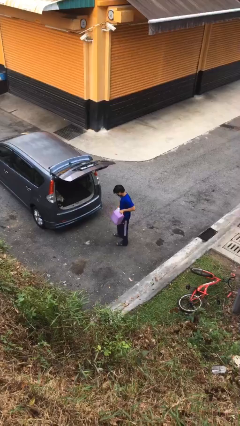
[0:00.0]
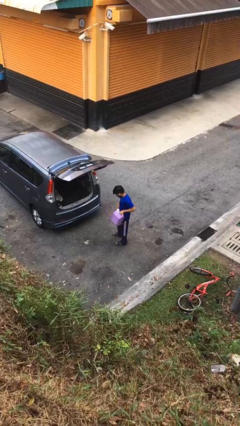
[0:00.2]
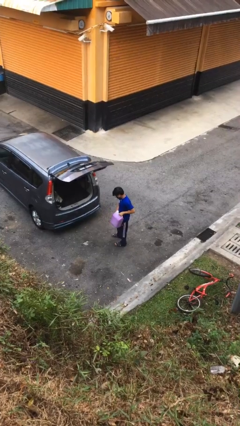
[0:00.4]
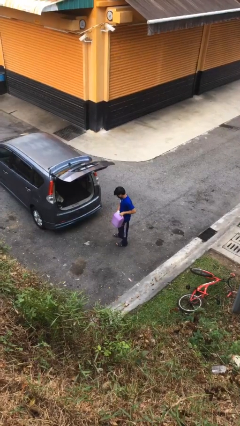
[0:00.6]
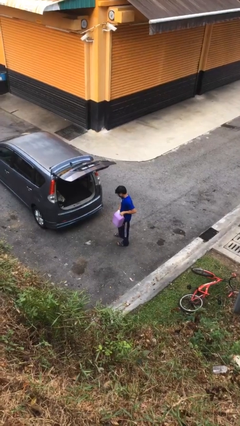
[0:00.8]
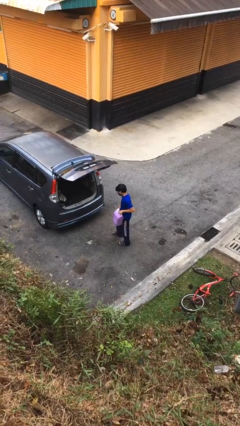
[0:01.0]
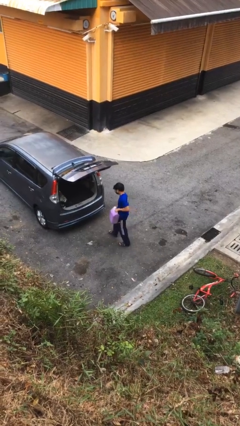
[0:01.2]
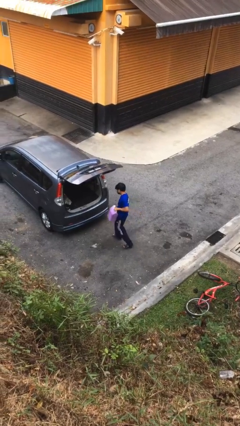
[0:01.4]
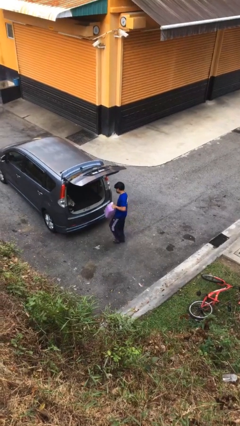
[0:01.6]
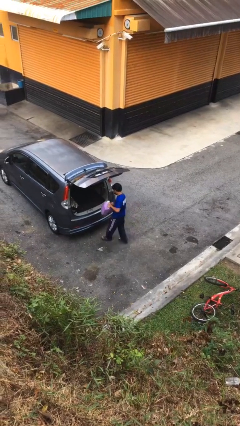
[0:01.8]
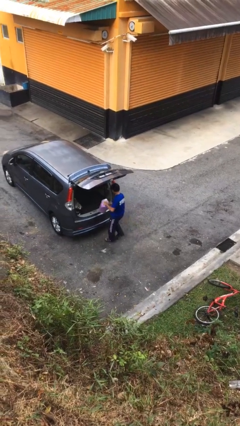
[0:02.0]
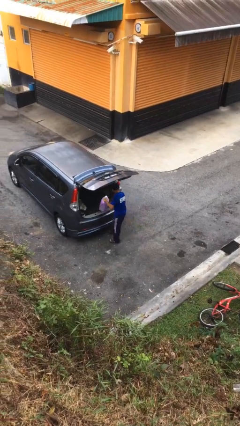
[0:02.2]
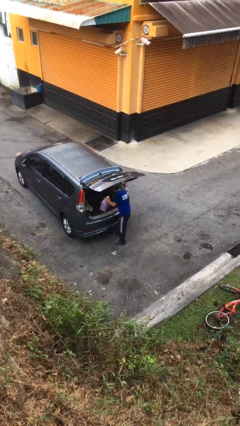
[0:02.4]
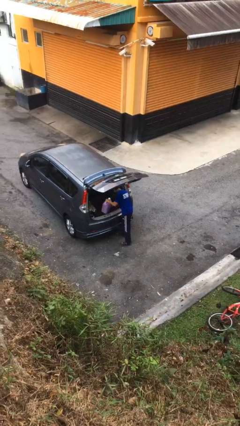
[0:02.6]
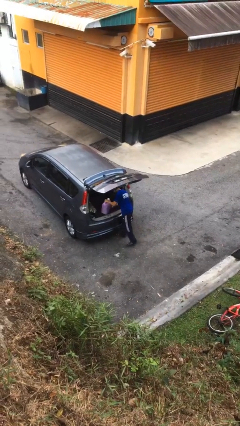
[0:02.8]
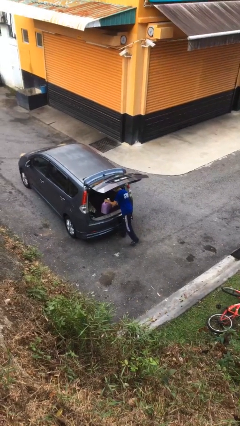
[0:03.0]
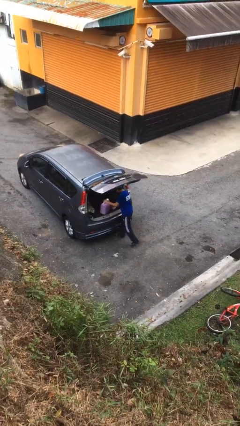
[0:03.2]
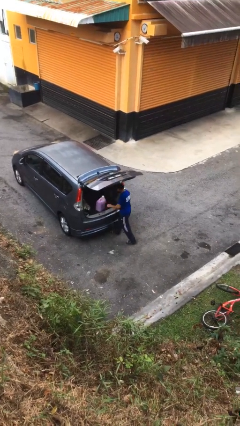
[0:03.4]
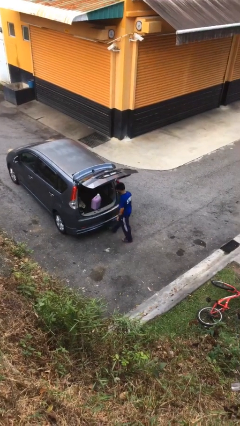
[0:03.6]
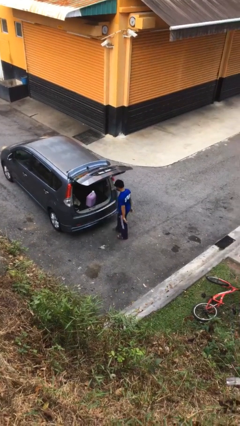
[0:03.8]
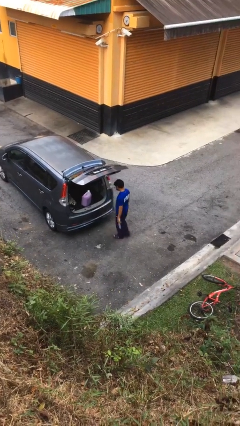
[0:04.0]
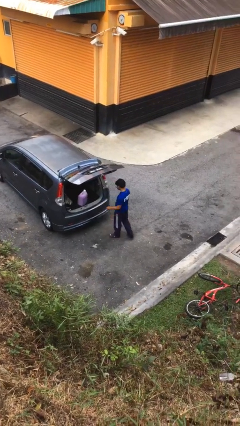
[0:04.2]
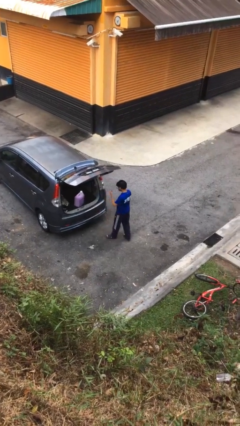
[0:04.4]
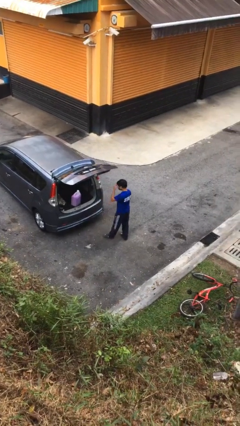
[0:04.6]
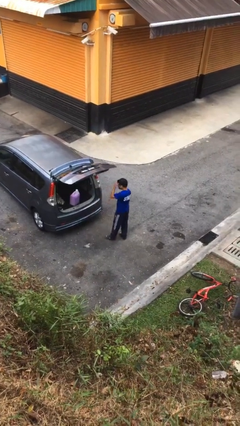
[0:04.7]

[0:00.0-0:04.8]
person loads car

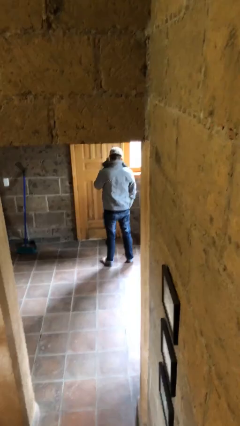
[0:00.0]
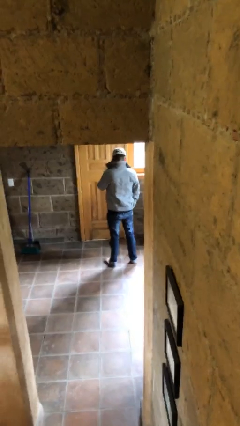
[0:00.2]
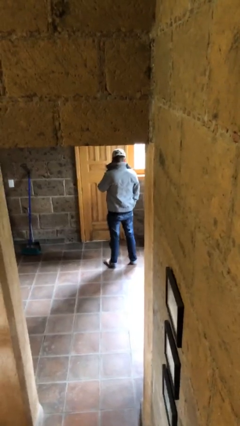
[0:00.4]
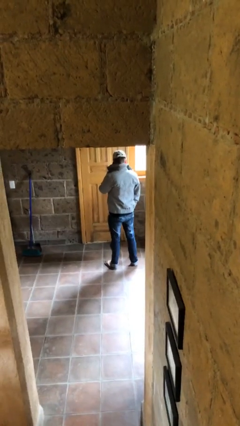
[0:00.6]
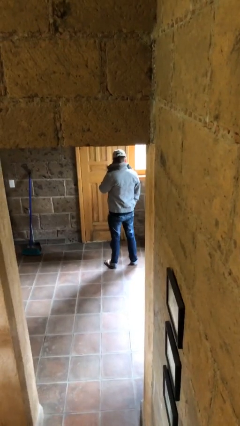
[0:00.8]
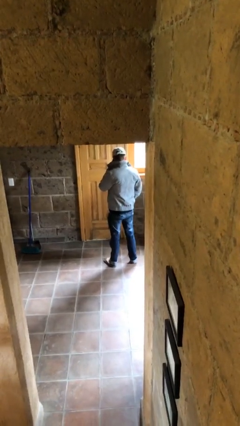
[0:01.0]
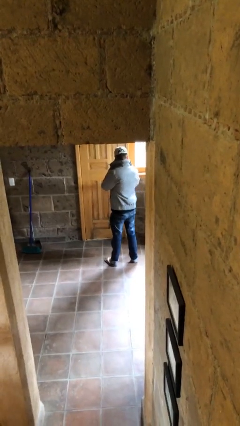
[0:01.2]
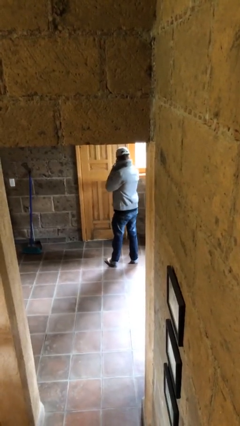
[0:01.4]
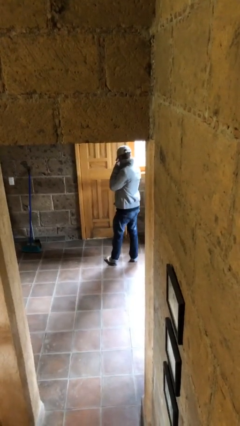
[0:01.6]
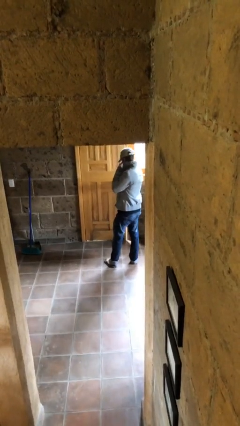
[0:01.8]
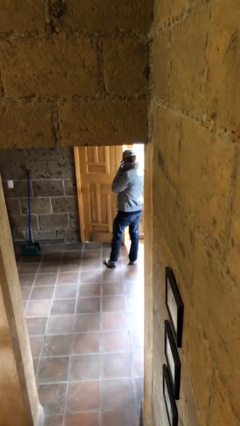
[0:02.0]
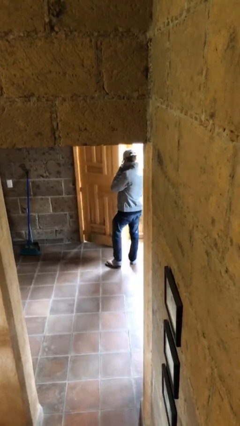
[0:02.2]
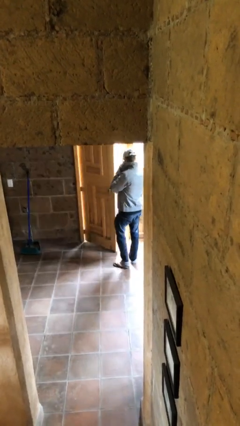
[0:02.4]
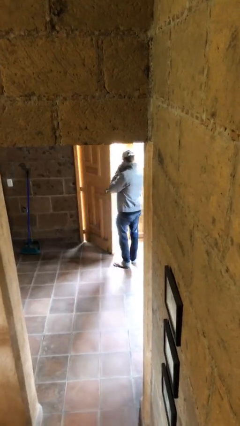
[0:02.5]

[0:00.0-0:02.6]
person opens facility door

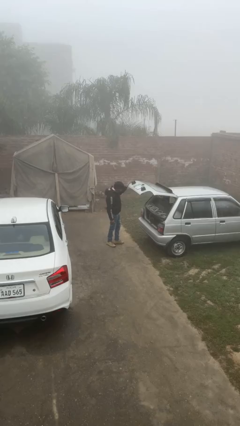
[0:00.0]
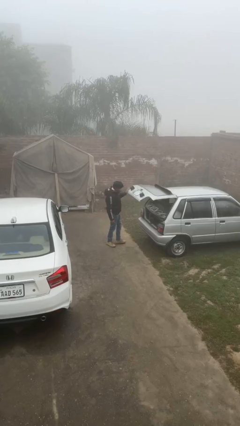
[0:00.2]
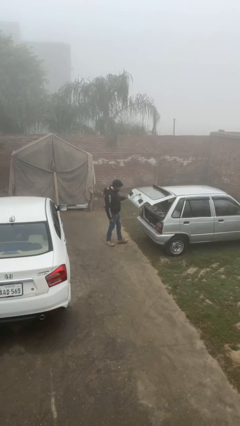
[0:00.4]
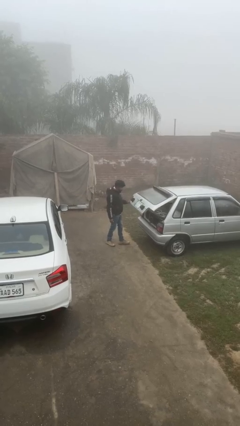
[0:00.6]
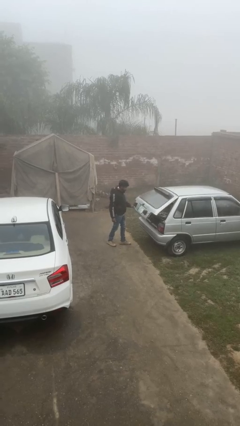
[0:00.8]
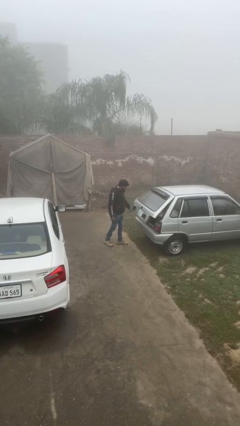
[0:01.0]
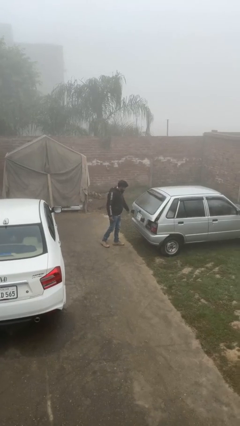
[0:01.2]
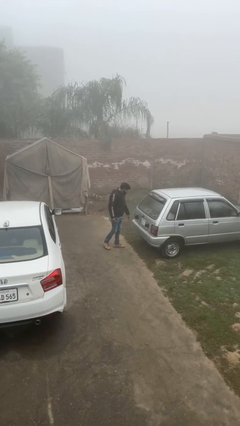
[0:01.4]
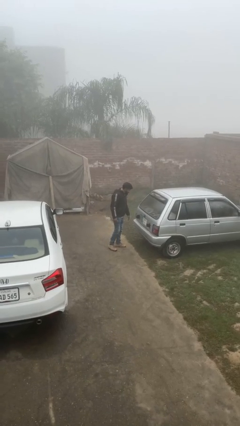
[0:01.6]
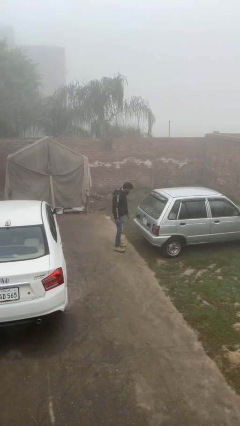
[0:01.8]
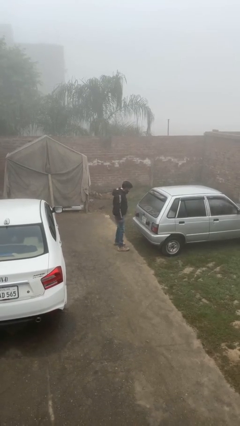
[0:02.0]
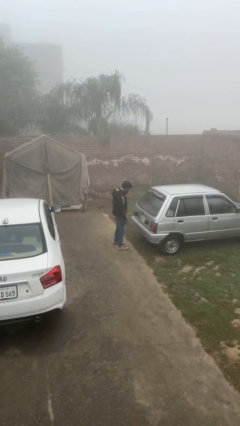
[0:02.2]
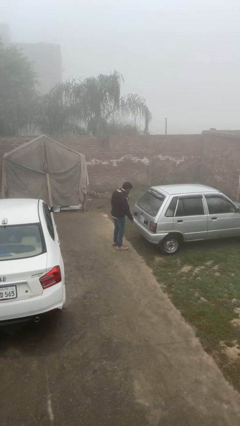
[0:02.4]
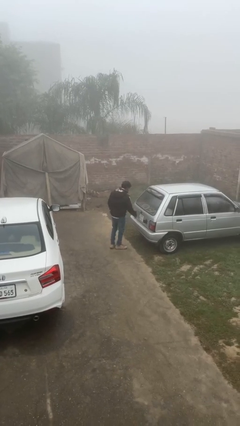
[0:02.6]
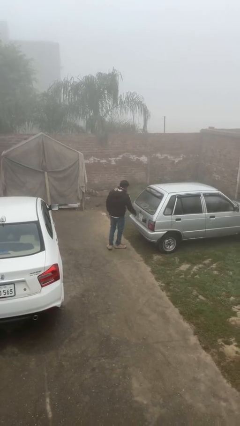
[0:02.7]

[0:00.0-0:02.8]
person closes car trunk

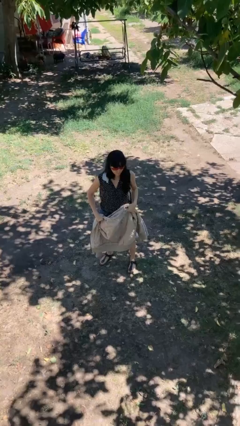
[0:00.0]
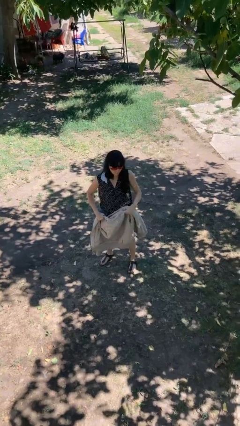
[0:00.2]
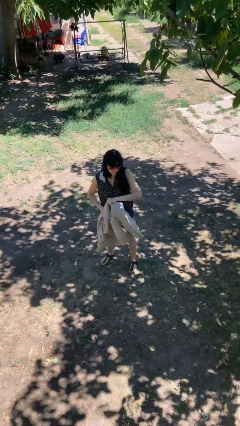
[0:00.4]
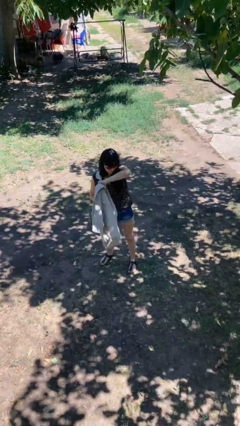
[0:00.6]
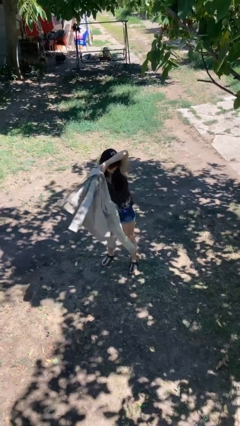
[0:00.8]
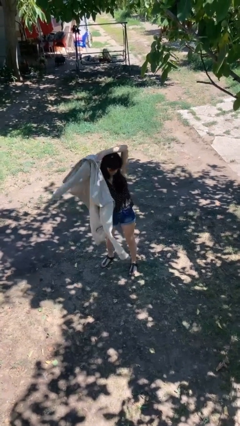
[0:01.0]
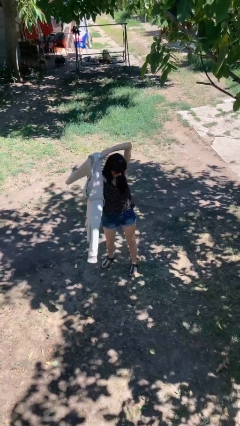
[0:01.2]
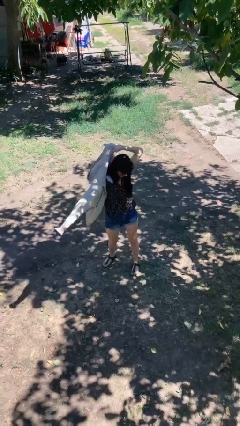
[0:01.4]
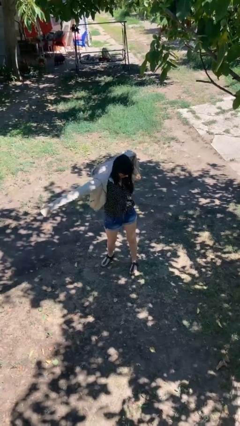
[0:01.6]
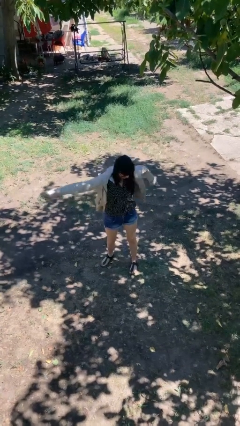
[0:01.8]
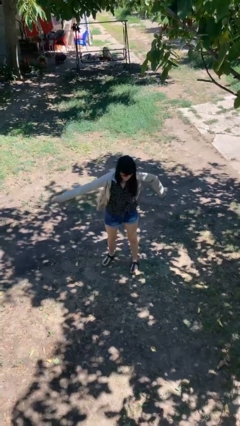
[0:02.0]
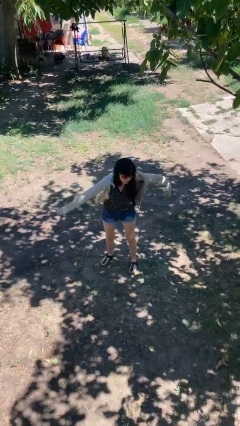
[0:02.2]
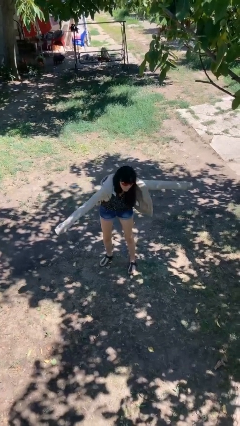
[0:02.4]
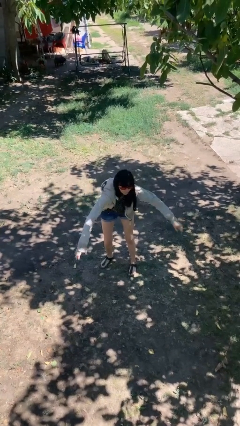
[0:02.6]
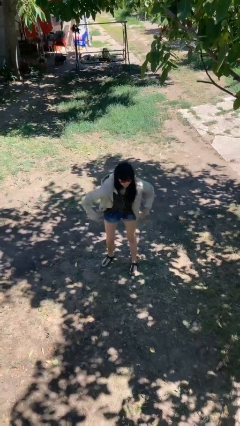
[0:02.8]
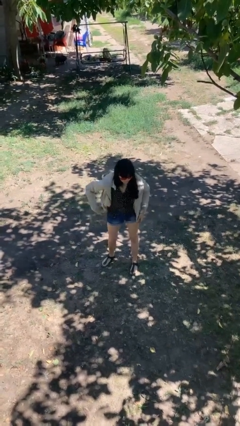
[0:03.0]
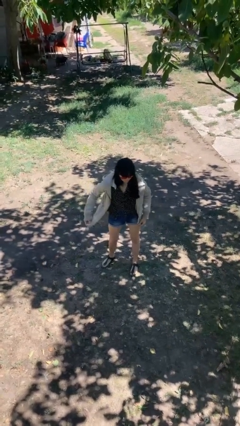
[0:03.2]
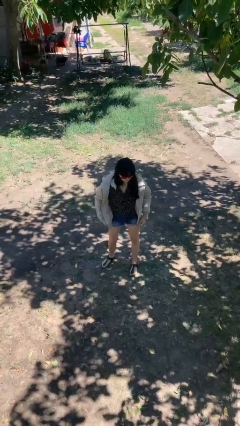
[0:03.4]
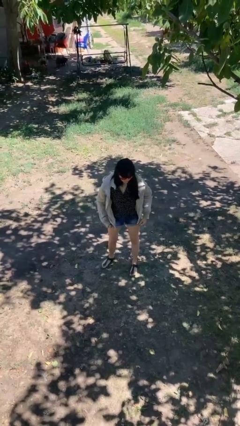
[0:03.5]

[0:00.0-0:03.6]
person puts on jacket

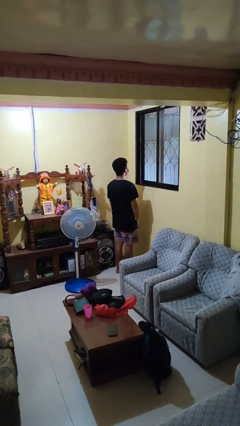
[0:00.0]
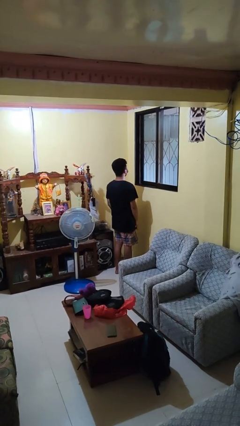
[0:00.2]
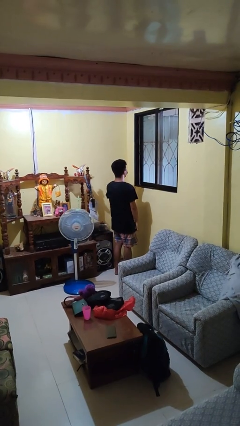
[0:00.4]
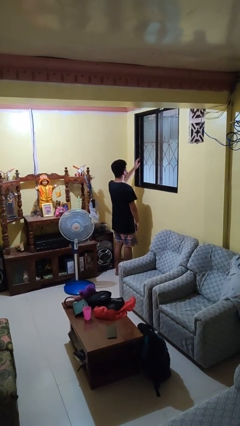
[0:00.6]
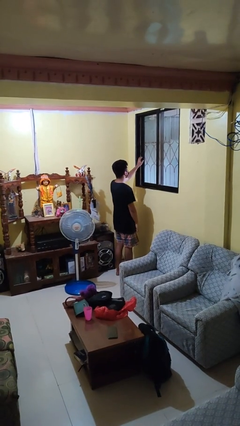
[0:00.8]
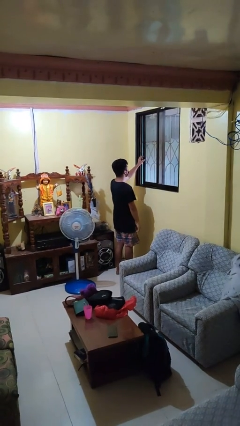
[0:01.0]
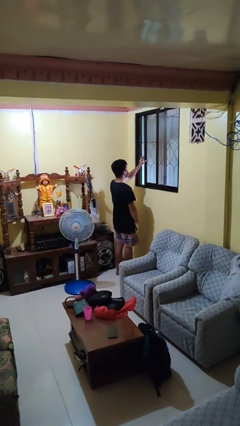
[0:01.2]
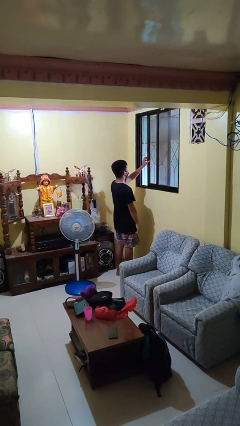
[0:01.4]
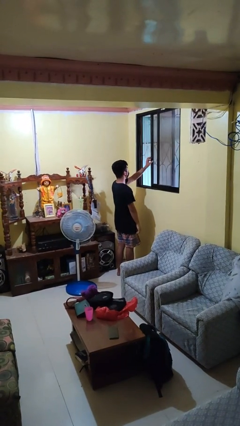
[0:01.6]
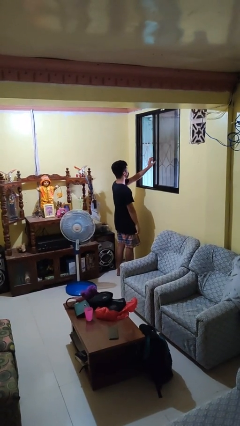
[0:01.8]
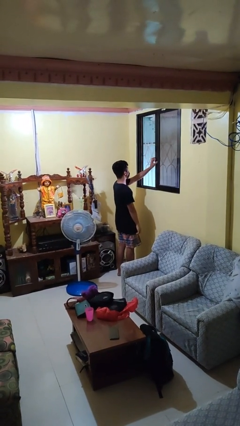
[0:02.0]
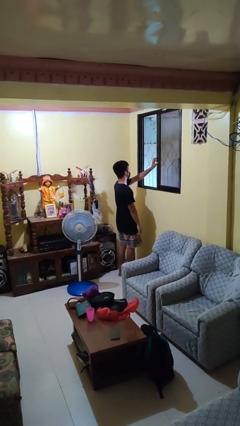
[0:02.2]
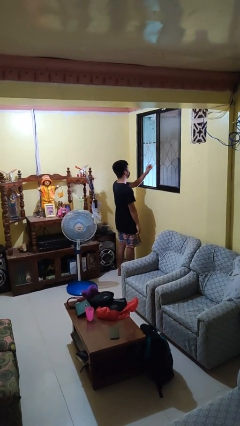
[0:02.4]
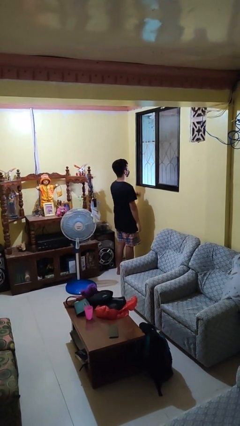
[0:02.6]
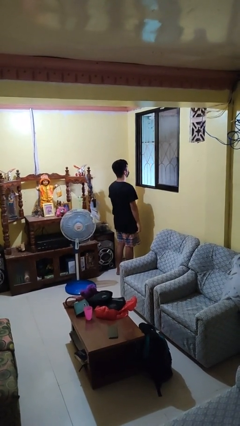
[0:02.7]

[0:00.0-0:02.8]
person opens home window

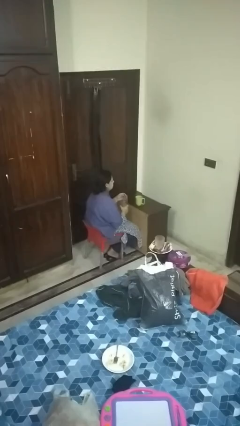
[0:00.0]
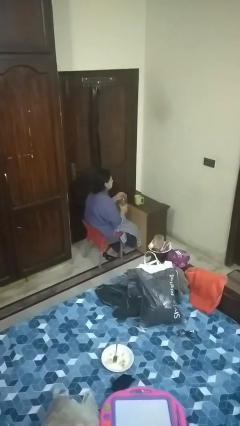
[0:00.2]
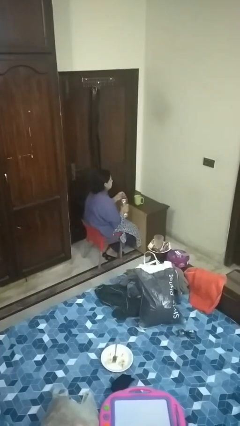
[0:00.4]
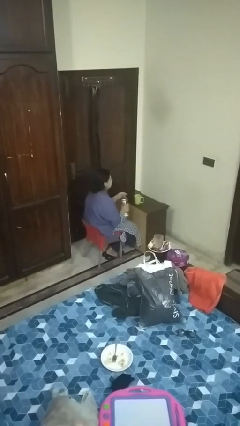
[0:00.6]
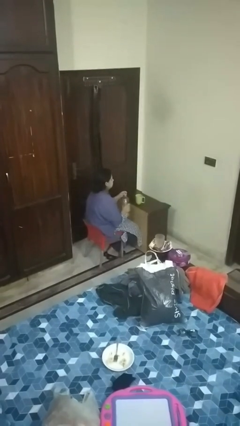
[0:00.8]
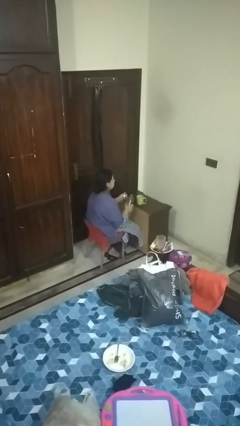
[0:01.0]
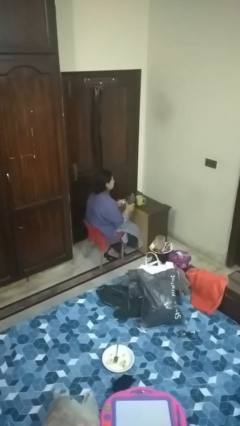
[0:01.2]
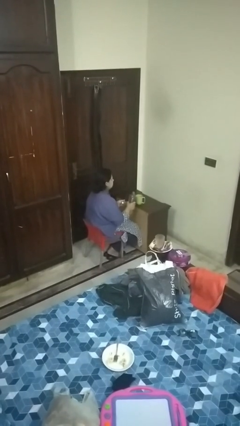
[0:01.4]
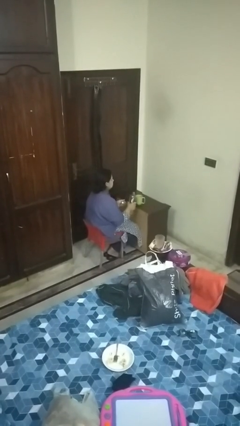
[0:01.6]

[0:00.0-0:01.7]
person unscrews lid from bottle
